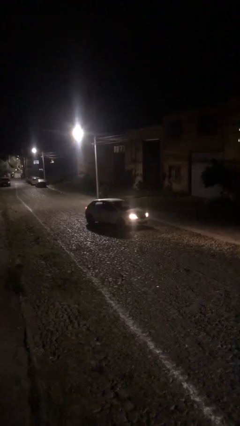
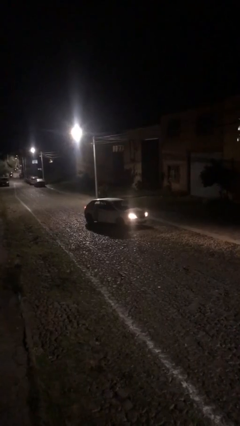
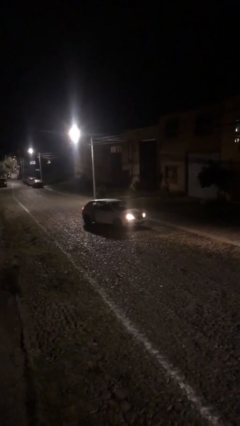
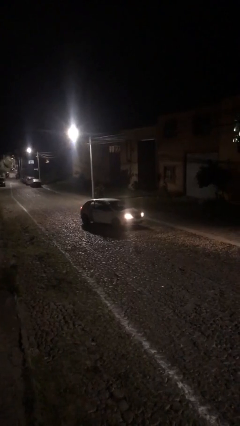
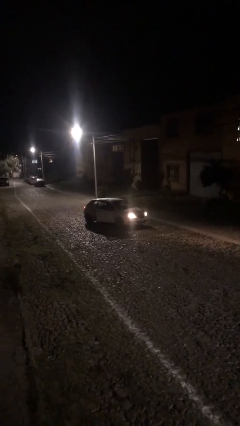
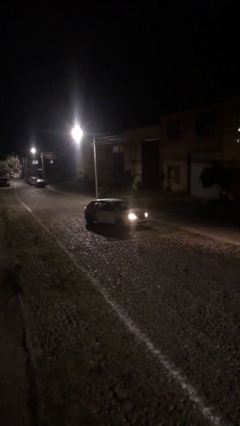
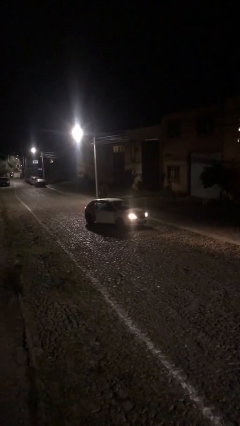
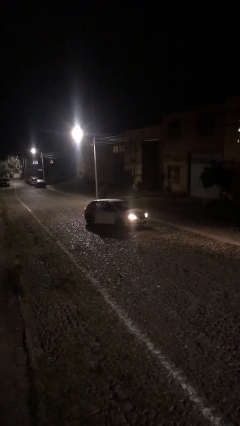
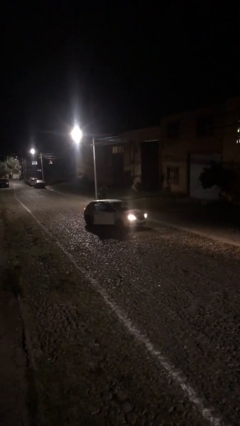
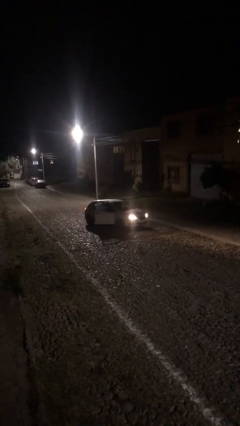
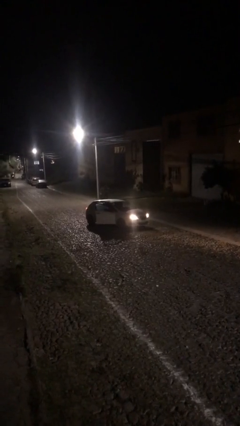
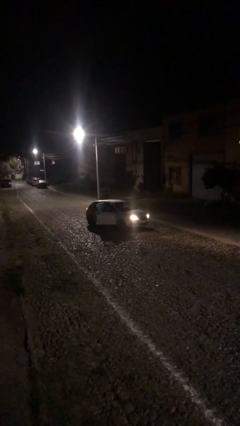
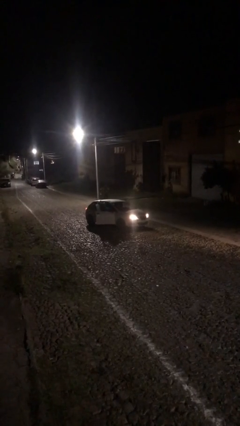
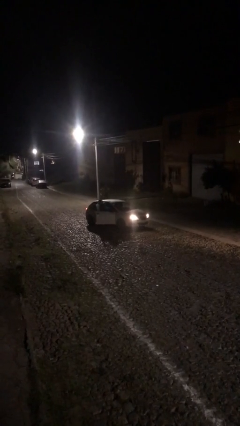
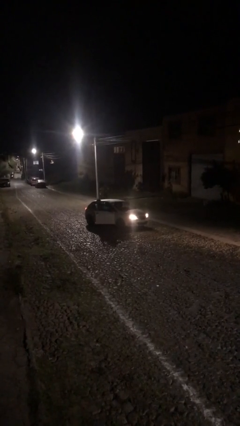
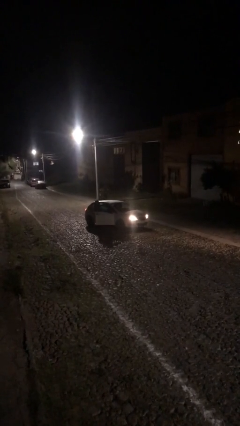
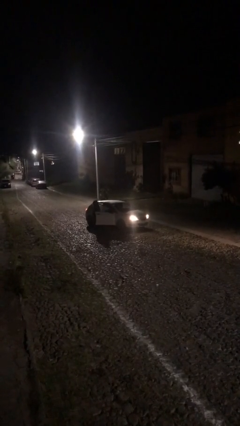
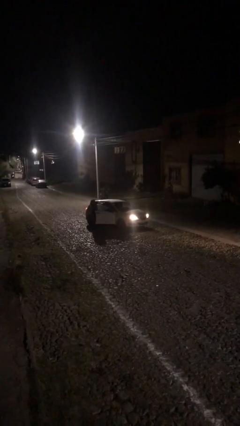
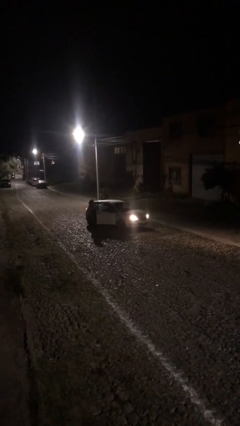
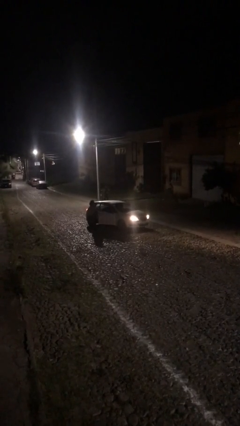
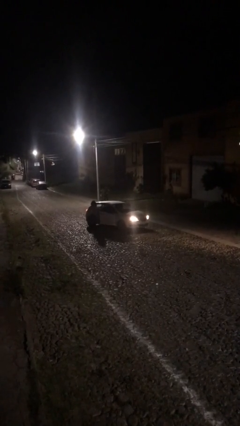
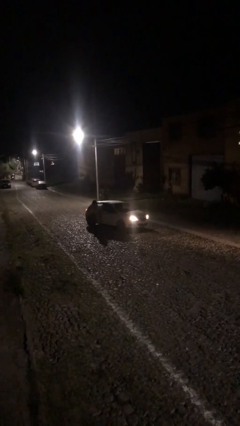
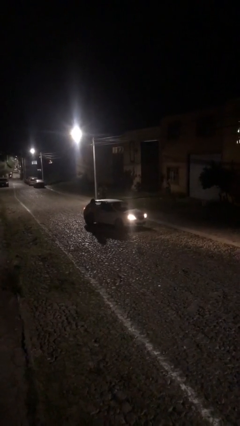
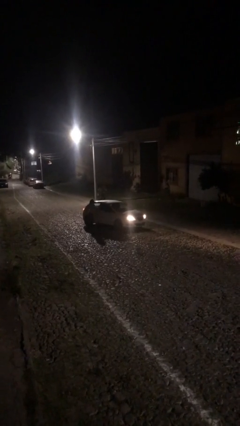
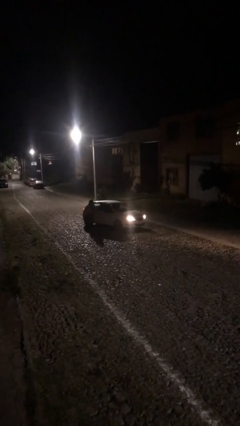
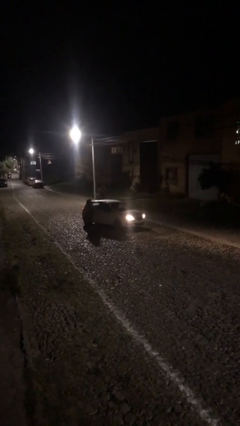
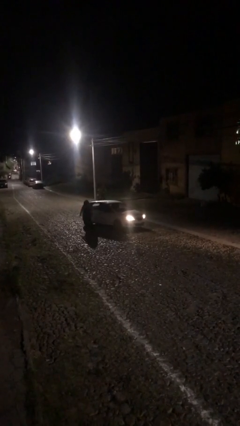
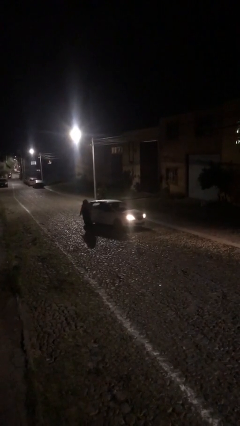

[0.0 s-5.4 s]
car drops off person

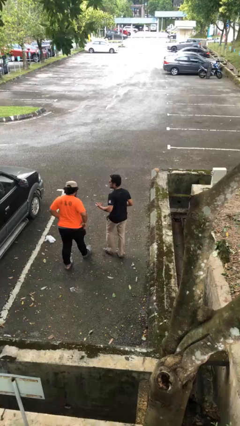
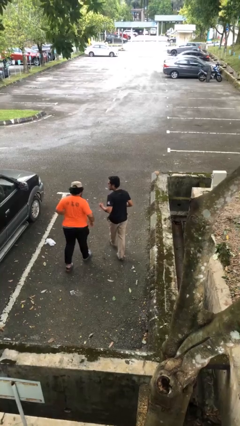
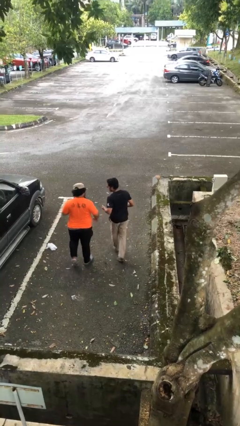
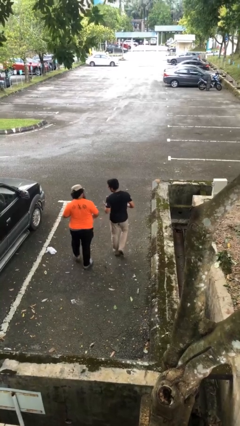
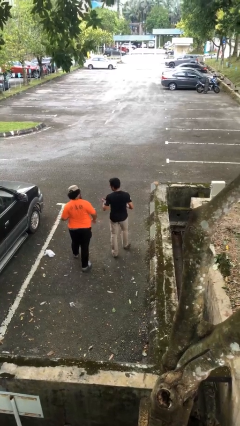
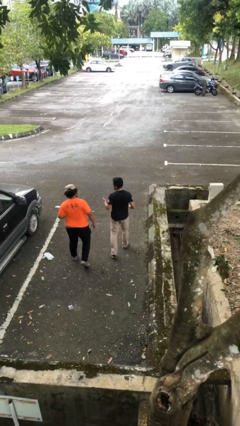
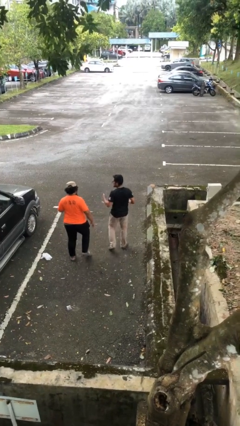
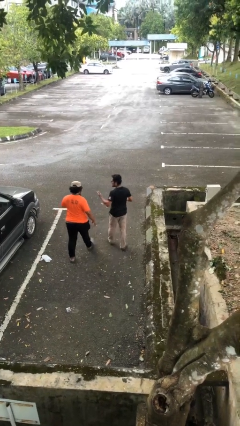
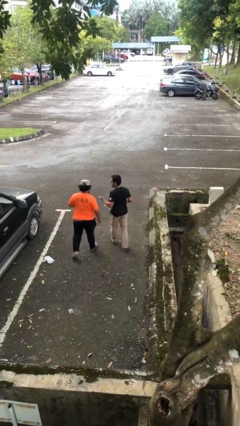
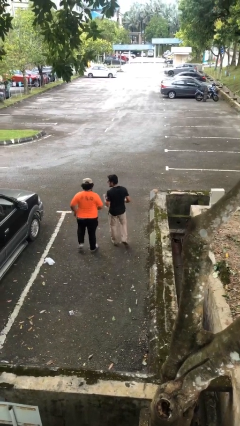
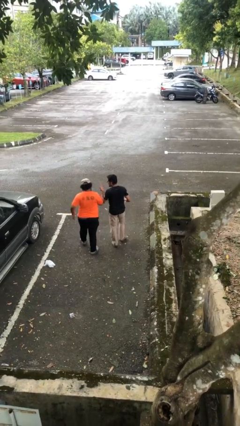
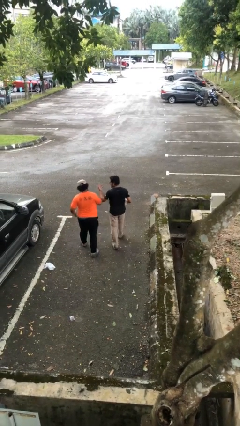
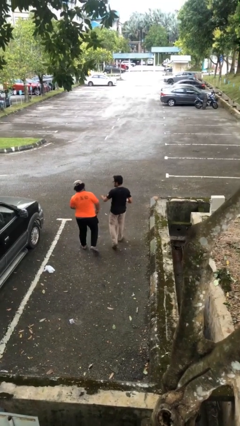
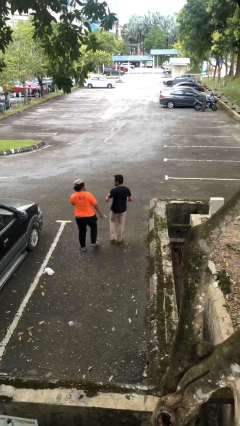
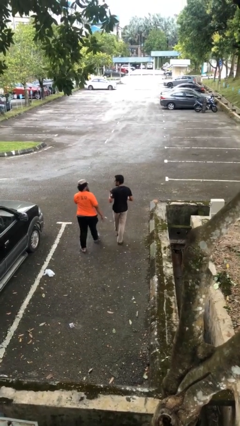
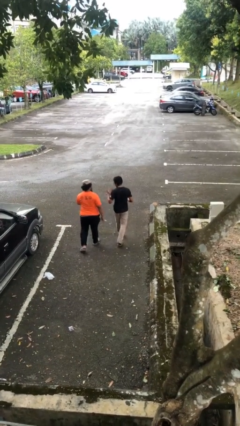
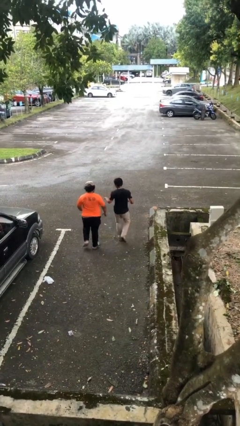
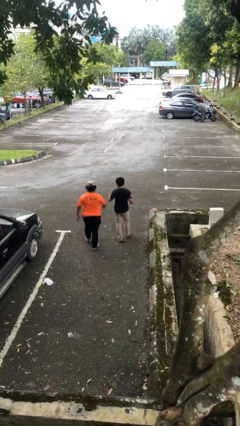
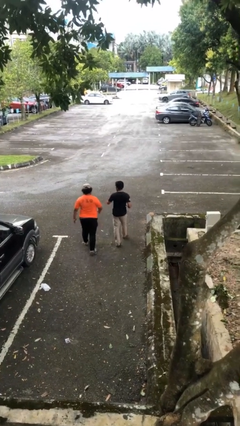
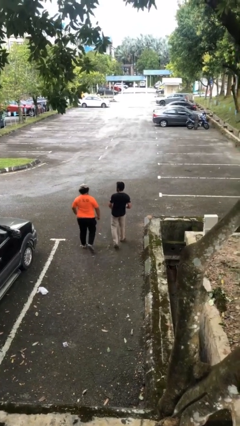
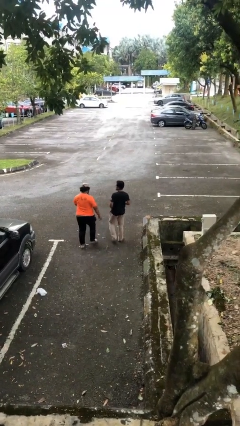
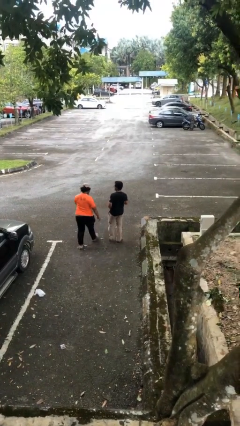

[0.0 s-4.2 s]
person talks to person

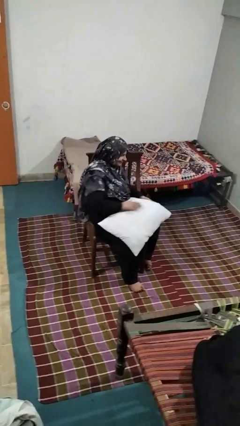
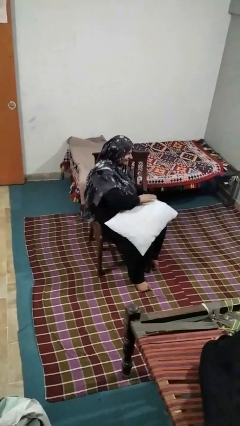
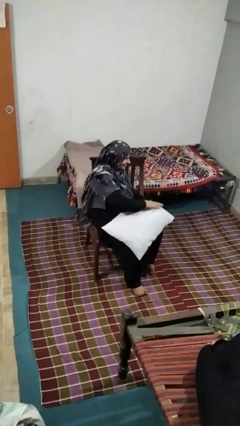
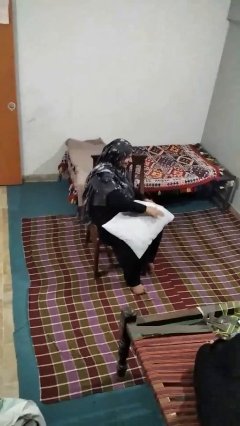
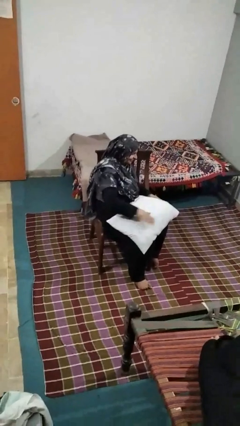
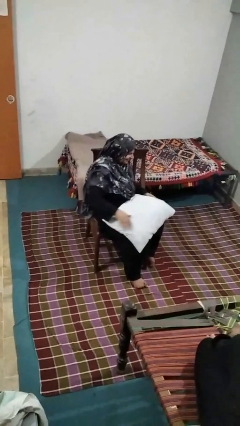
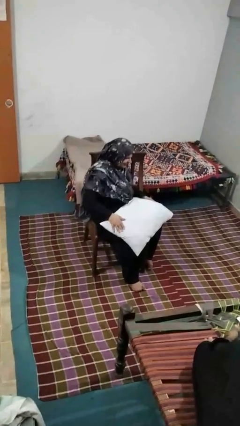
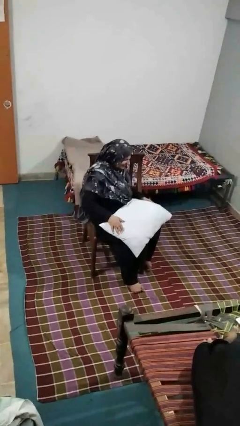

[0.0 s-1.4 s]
person waves hand over object

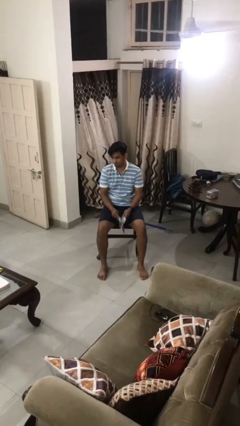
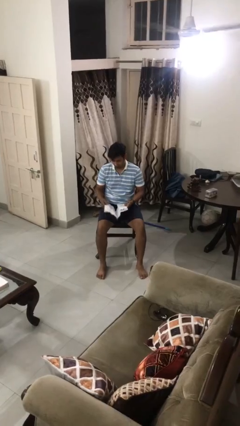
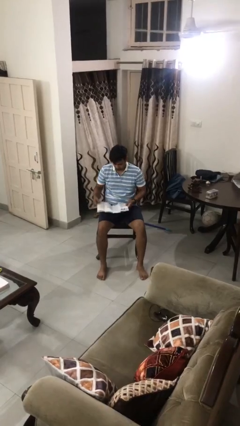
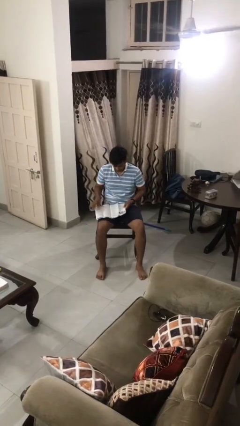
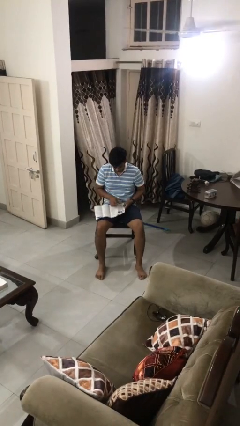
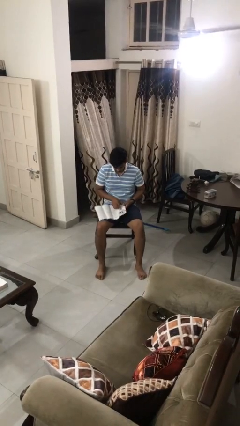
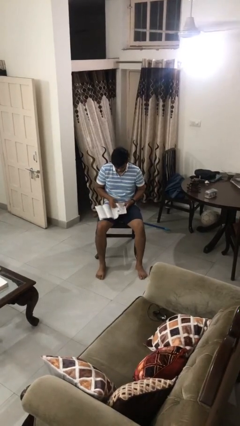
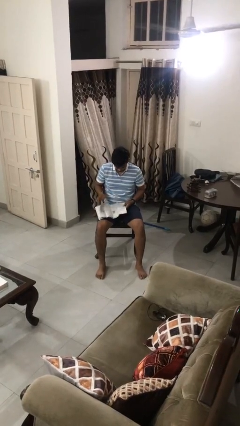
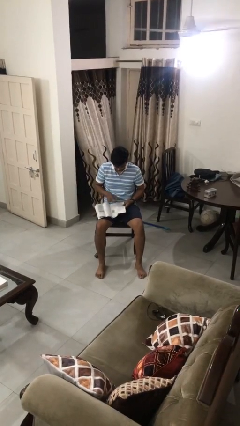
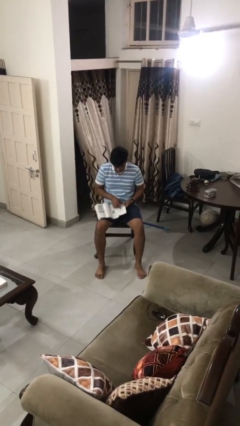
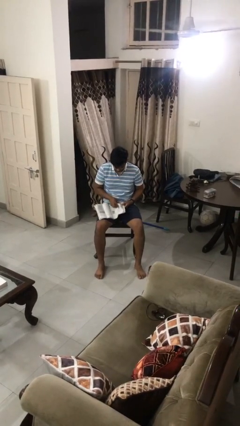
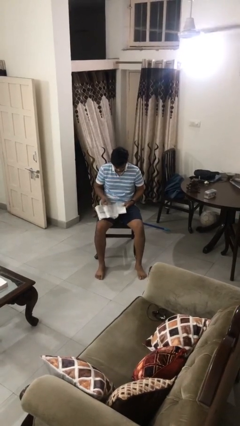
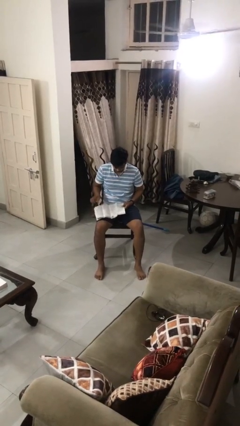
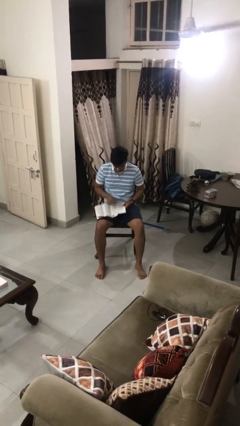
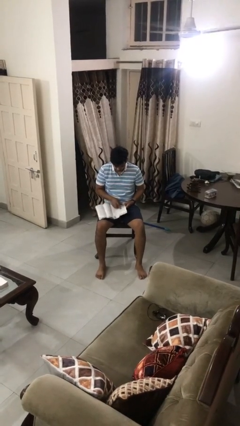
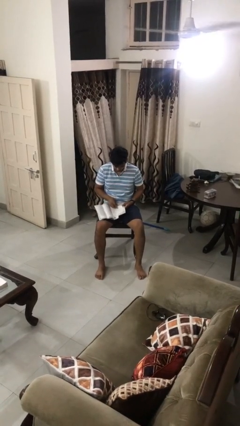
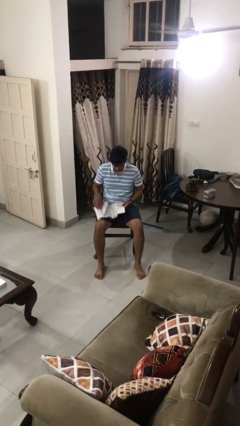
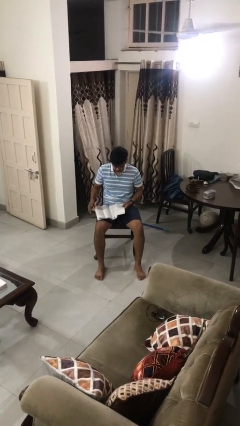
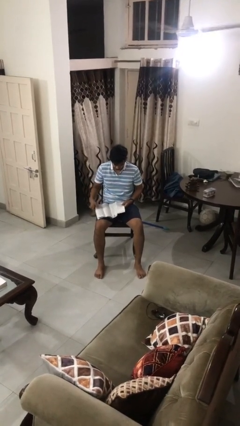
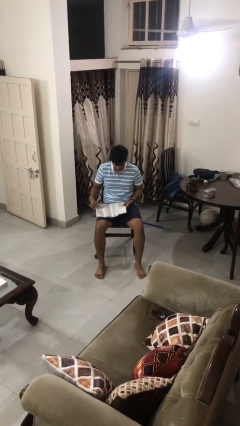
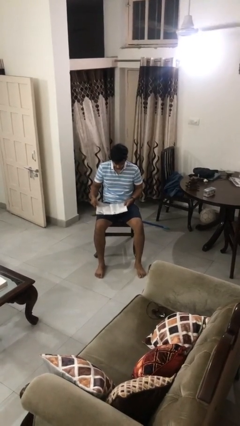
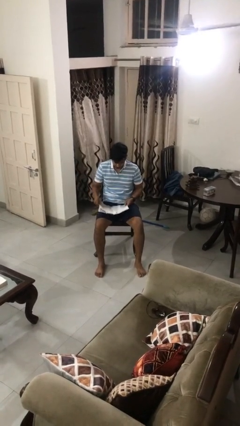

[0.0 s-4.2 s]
person reads magazine

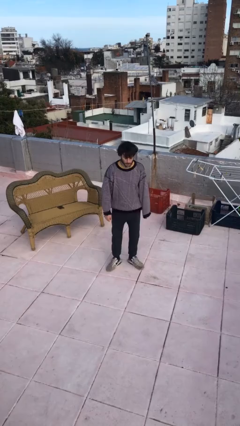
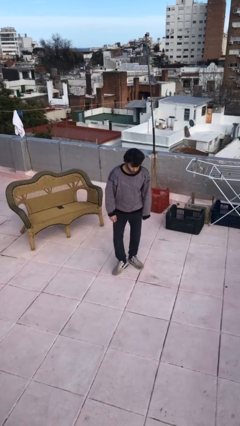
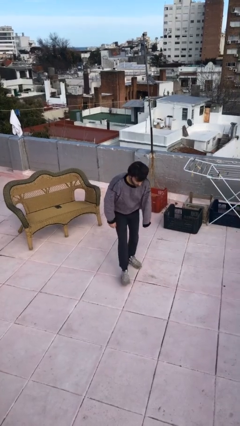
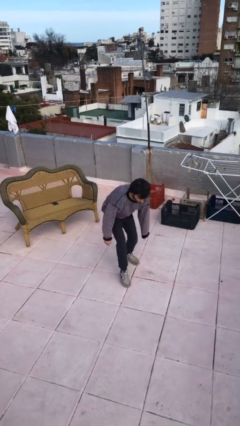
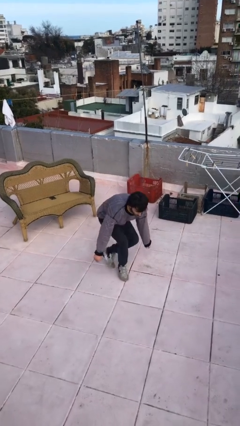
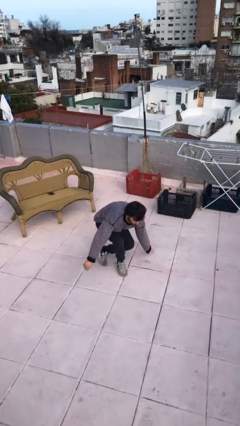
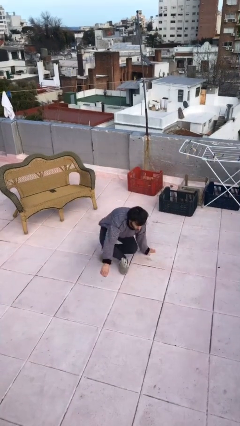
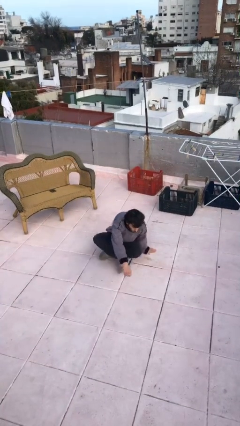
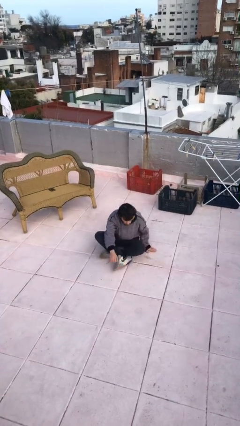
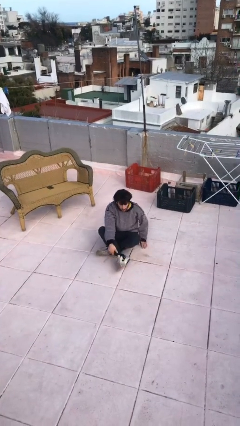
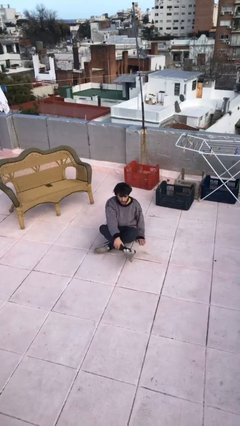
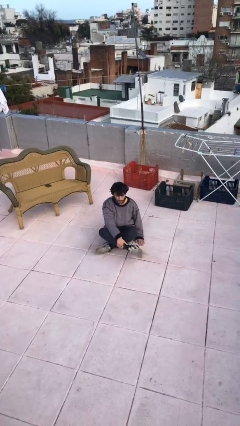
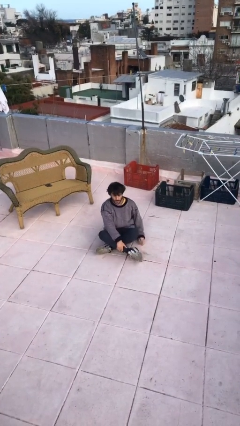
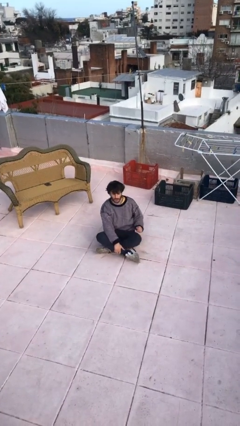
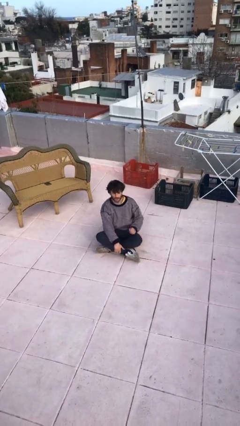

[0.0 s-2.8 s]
person sits crisscross
